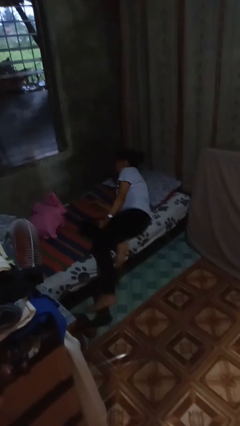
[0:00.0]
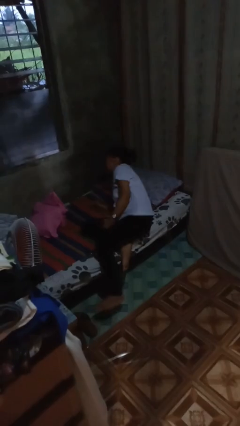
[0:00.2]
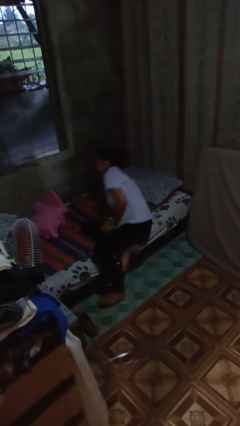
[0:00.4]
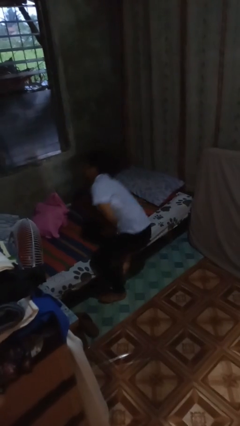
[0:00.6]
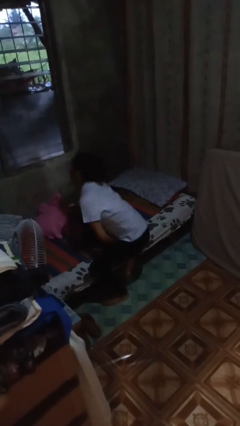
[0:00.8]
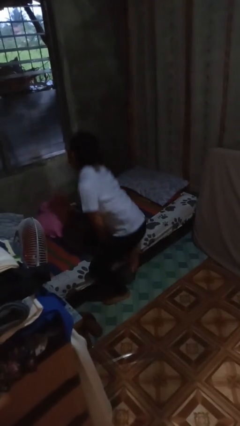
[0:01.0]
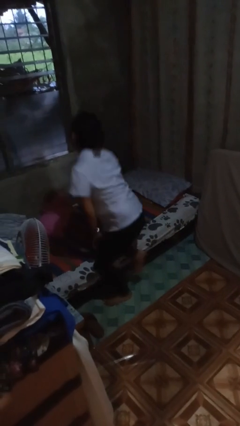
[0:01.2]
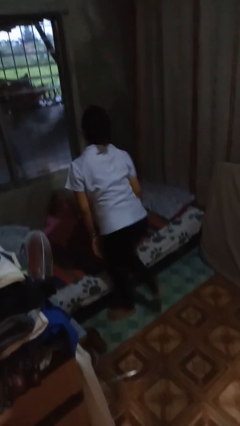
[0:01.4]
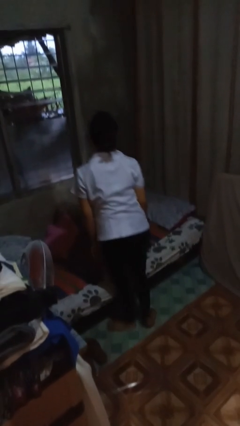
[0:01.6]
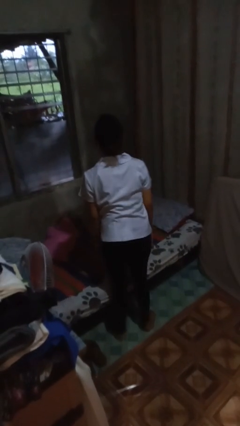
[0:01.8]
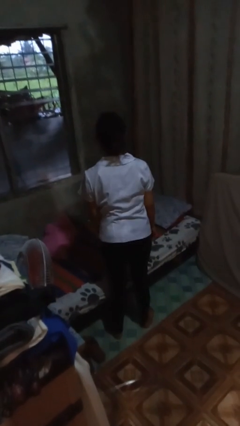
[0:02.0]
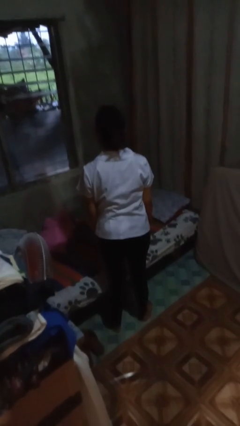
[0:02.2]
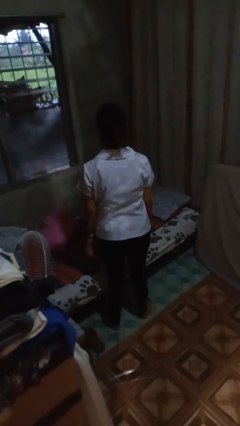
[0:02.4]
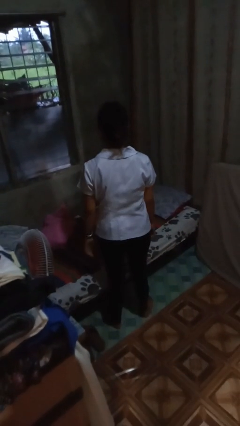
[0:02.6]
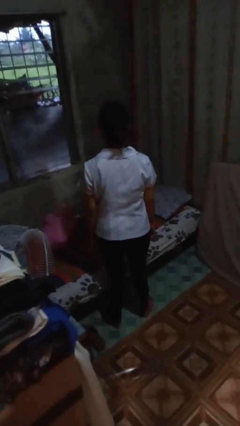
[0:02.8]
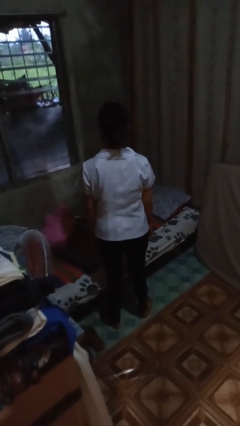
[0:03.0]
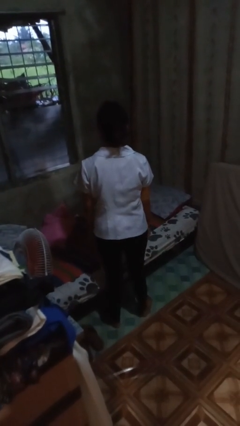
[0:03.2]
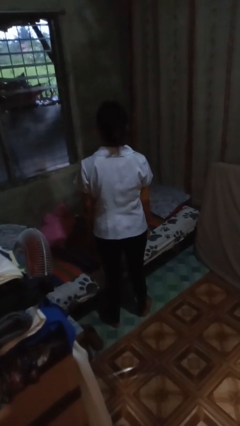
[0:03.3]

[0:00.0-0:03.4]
person stands up

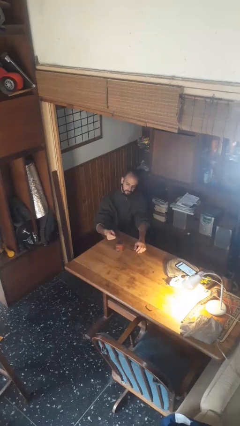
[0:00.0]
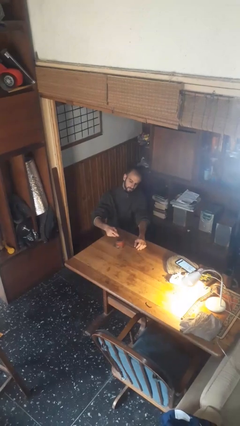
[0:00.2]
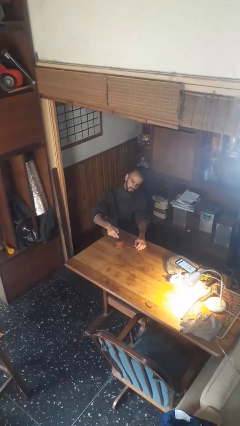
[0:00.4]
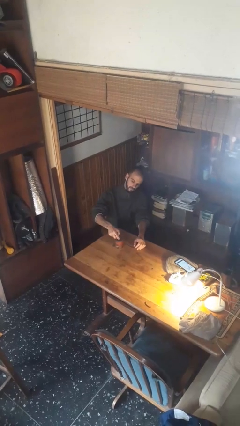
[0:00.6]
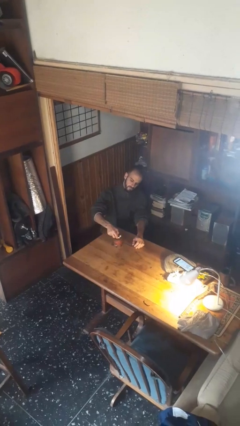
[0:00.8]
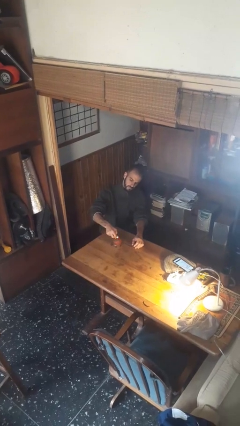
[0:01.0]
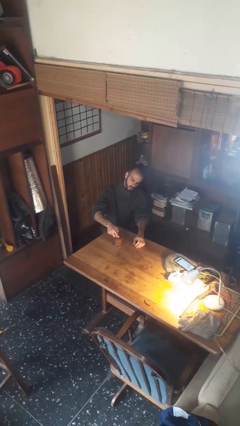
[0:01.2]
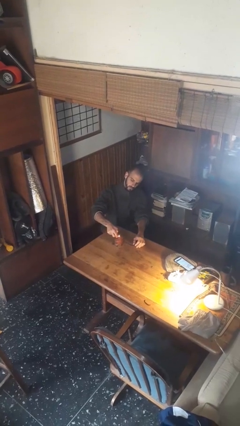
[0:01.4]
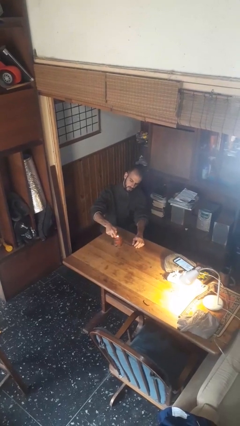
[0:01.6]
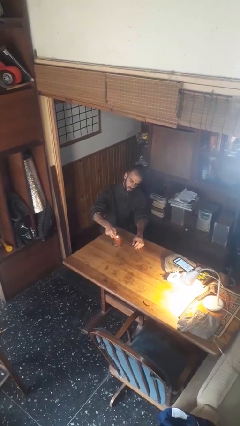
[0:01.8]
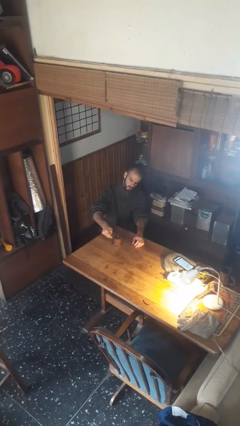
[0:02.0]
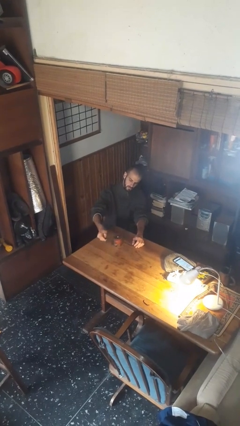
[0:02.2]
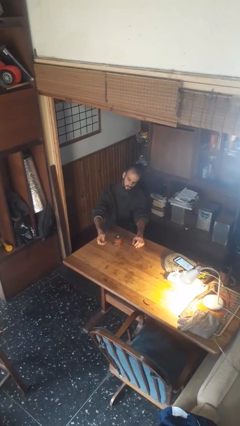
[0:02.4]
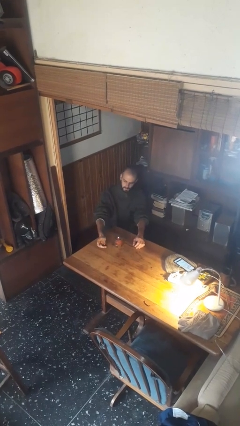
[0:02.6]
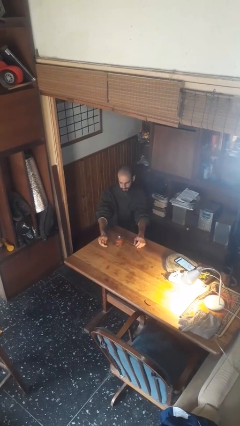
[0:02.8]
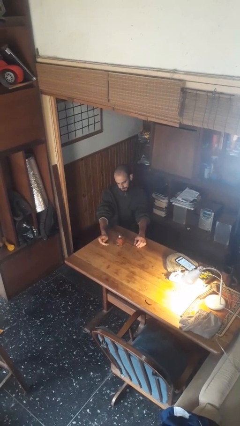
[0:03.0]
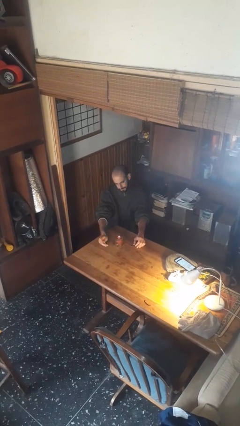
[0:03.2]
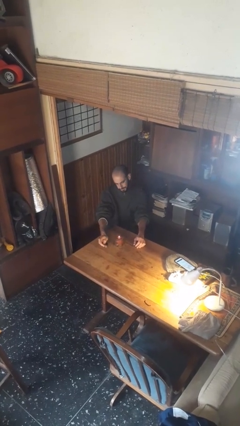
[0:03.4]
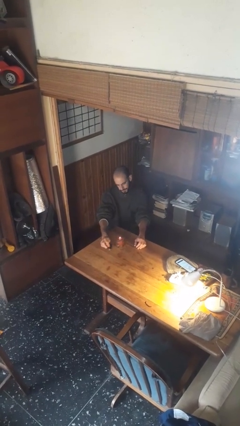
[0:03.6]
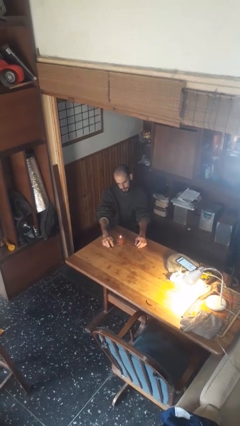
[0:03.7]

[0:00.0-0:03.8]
person lights candle

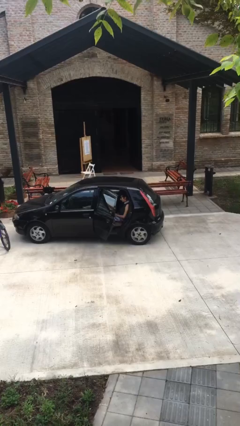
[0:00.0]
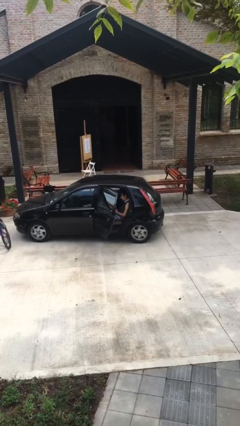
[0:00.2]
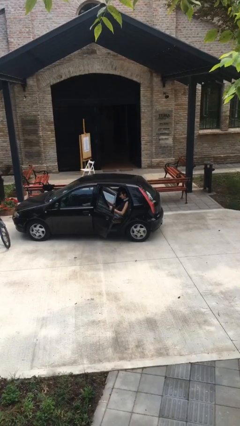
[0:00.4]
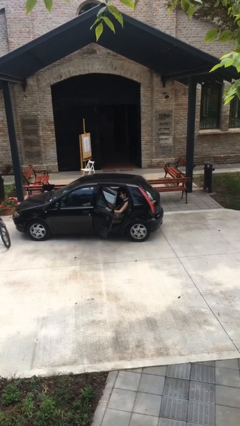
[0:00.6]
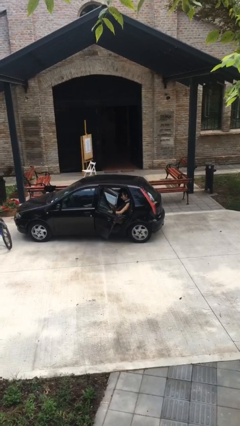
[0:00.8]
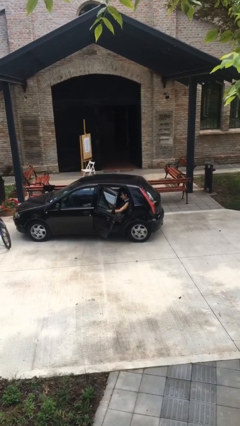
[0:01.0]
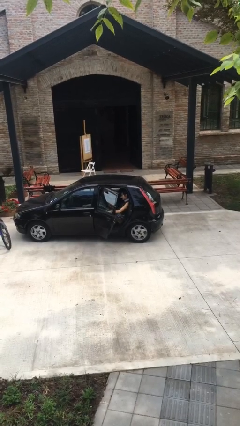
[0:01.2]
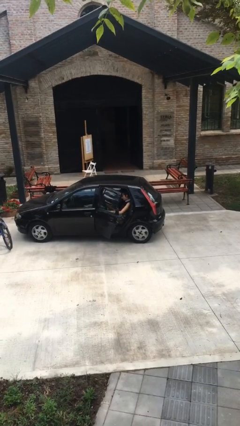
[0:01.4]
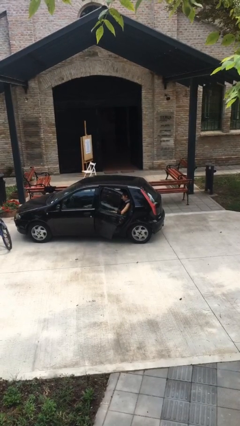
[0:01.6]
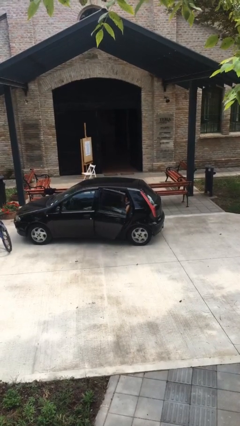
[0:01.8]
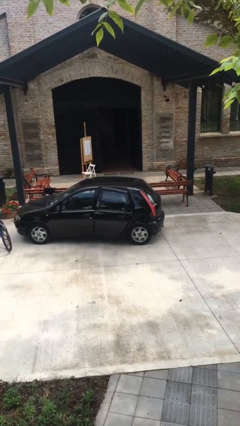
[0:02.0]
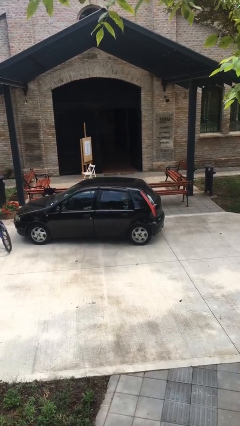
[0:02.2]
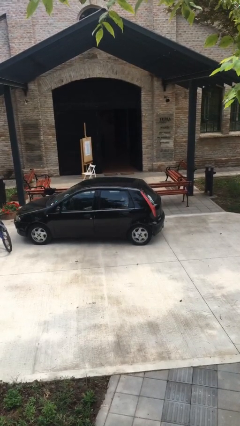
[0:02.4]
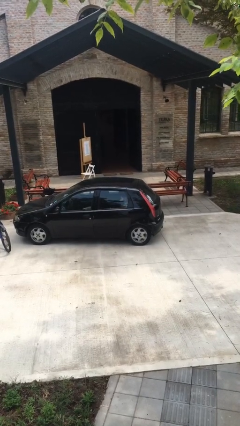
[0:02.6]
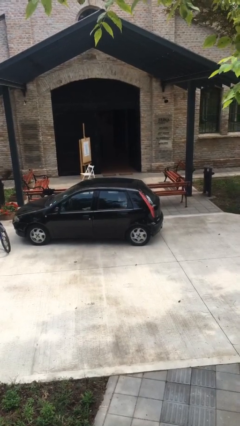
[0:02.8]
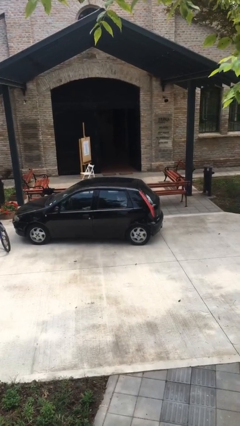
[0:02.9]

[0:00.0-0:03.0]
person closes car door

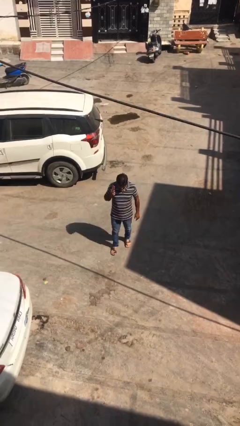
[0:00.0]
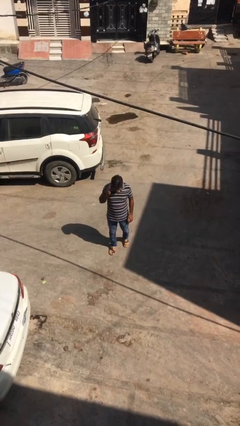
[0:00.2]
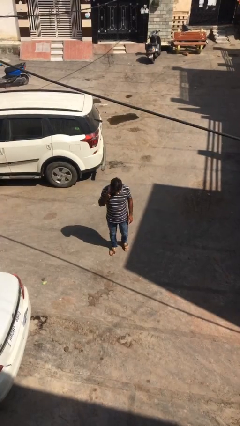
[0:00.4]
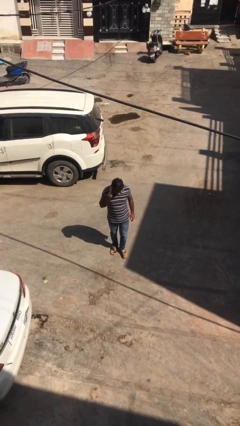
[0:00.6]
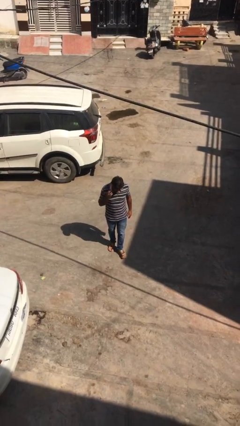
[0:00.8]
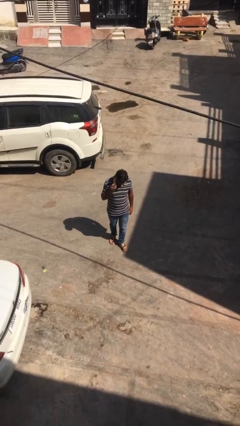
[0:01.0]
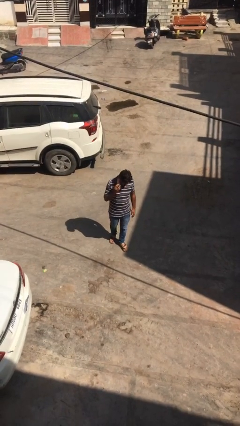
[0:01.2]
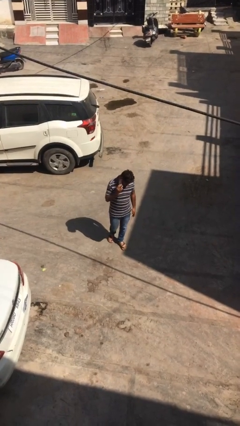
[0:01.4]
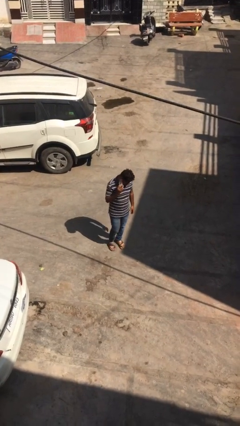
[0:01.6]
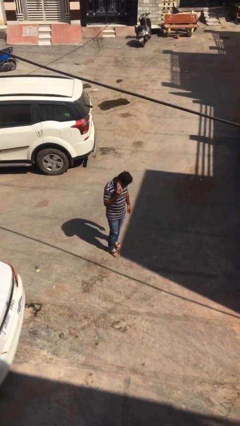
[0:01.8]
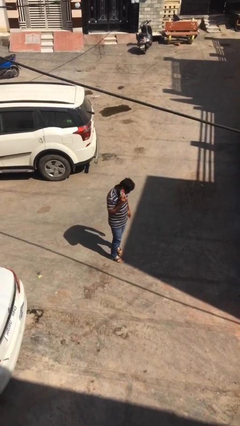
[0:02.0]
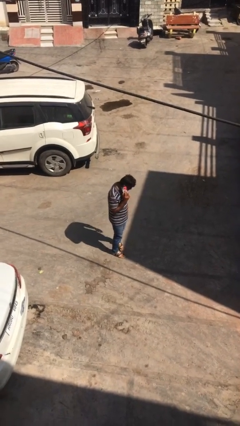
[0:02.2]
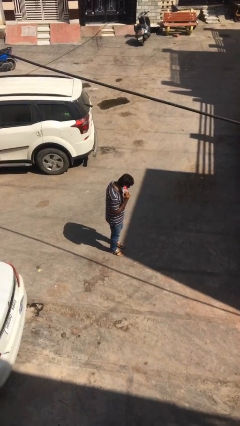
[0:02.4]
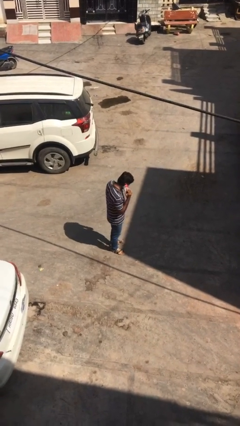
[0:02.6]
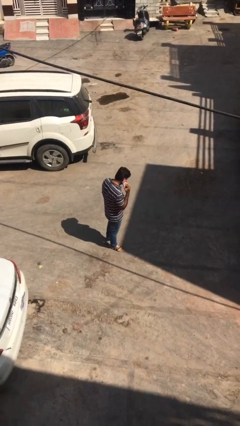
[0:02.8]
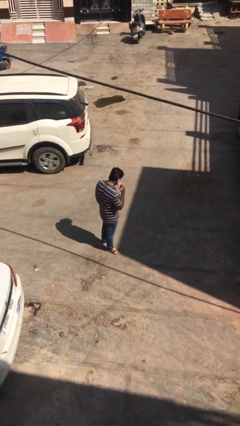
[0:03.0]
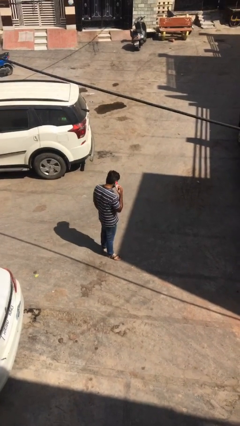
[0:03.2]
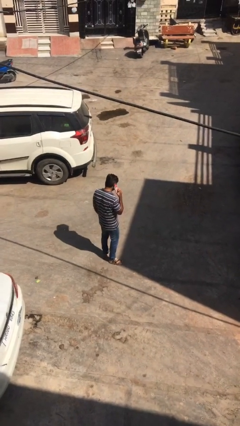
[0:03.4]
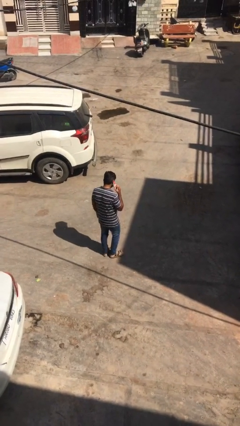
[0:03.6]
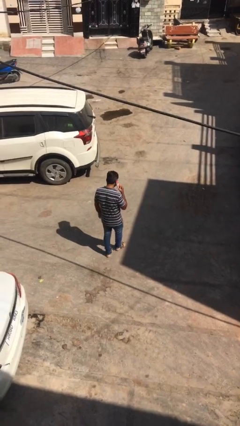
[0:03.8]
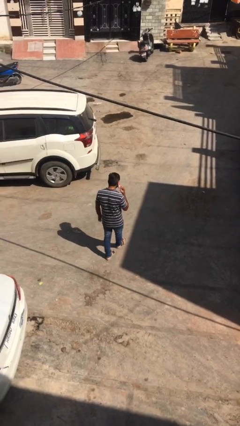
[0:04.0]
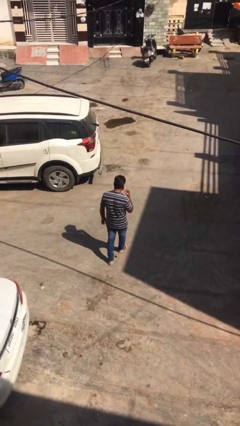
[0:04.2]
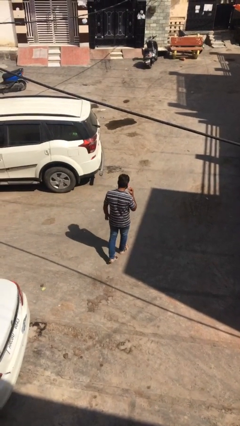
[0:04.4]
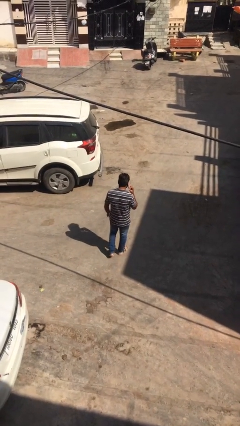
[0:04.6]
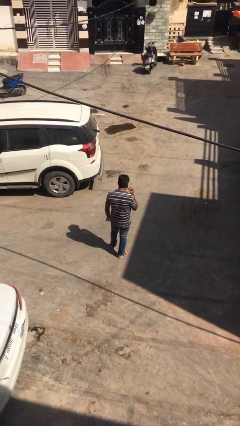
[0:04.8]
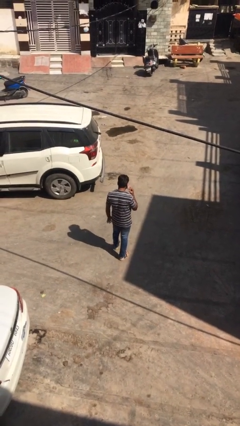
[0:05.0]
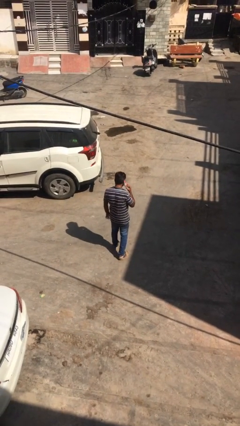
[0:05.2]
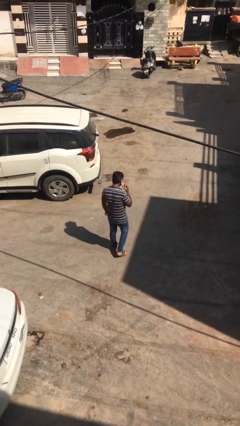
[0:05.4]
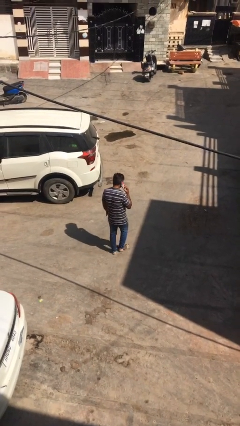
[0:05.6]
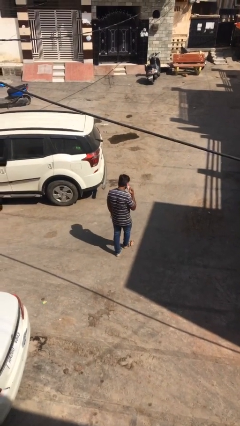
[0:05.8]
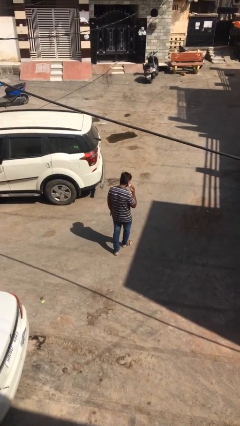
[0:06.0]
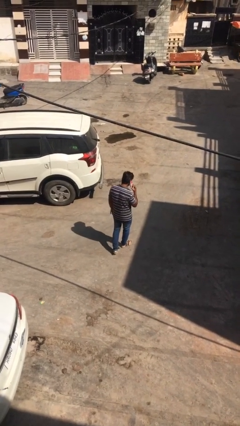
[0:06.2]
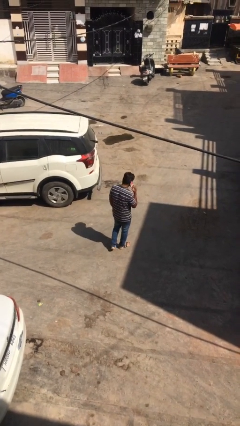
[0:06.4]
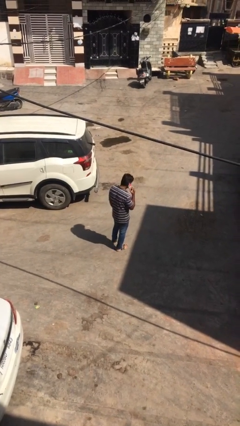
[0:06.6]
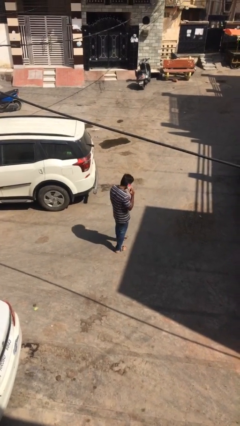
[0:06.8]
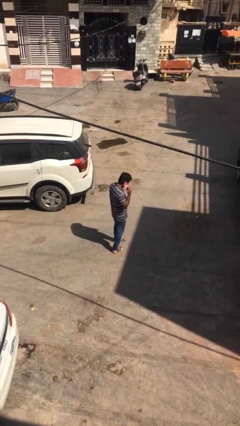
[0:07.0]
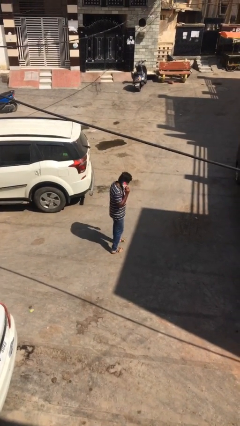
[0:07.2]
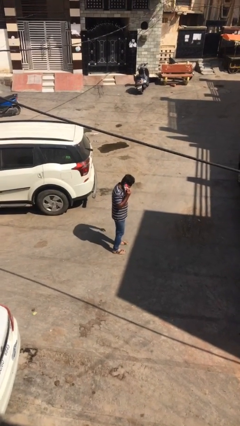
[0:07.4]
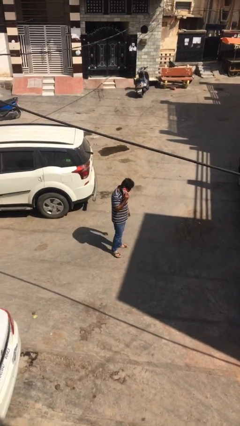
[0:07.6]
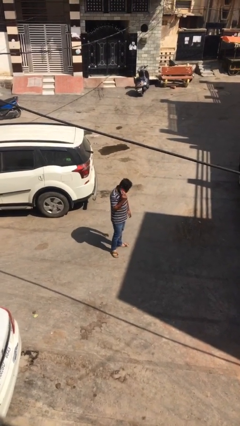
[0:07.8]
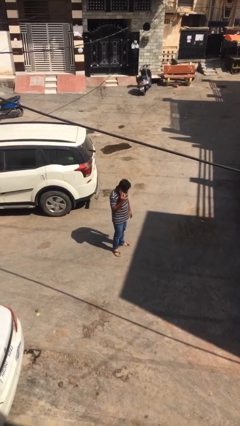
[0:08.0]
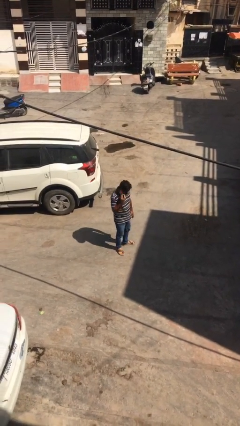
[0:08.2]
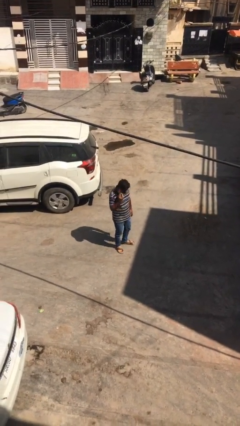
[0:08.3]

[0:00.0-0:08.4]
person talks on phone
